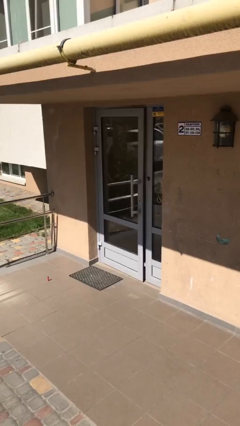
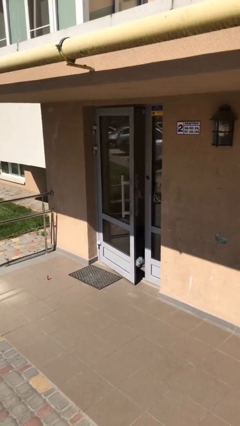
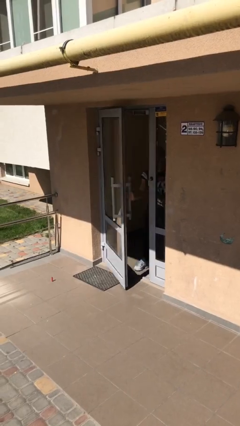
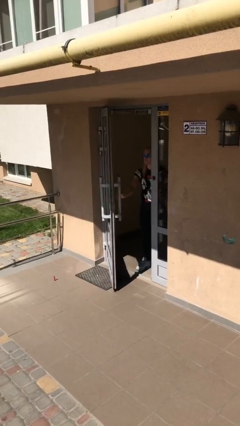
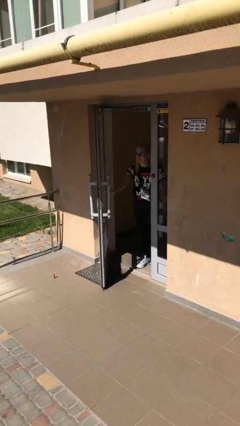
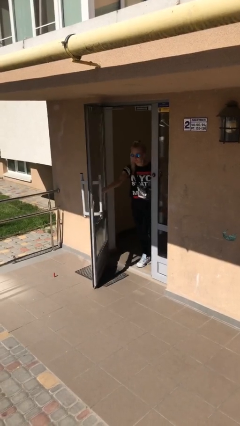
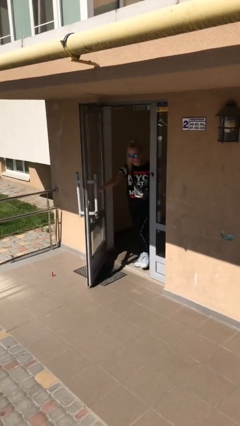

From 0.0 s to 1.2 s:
person opens facility door

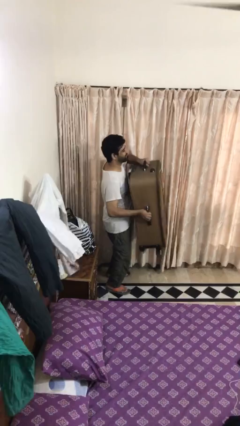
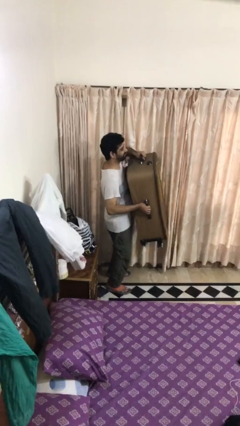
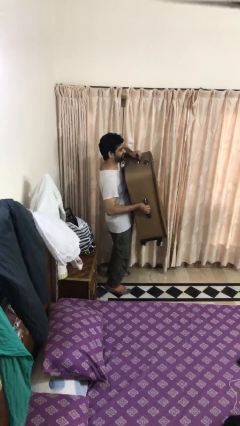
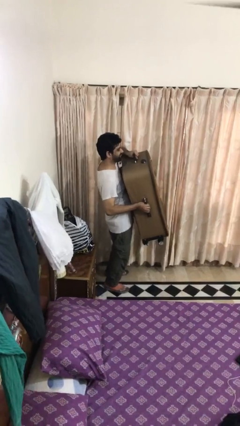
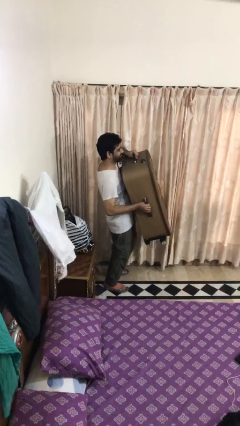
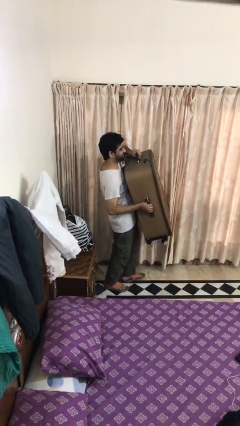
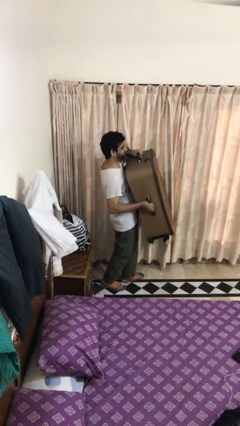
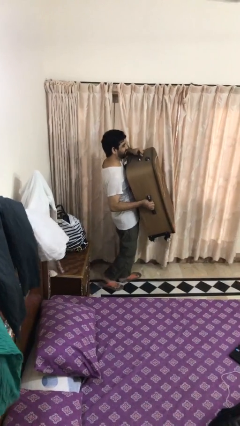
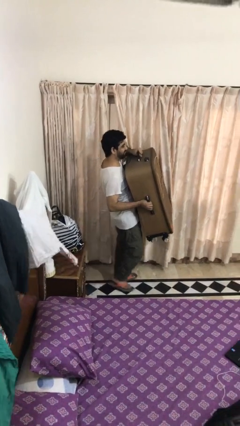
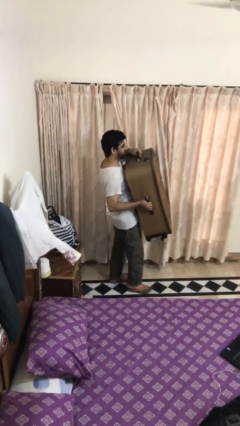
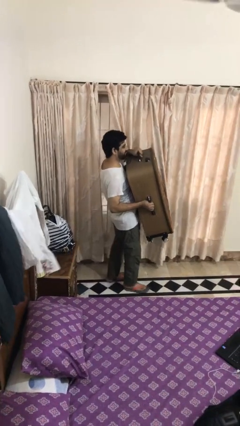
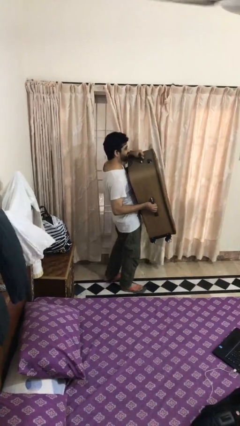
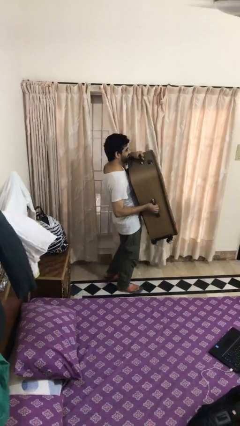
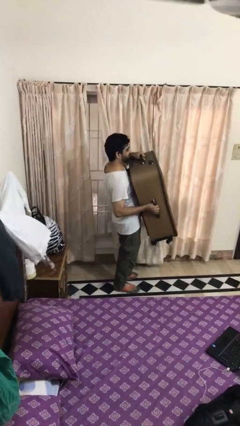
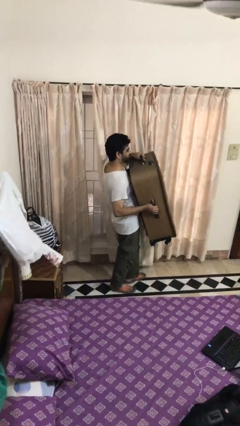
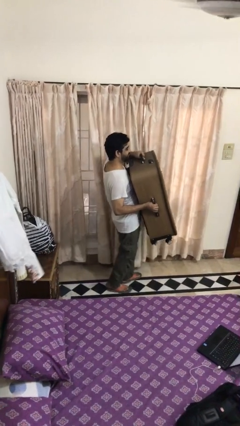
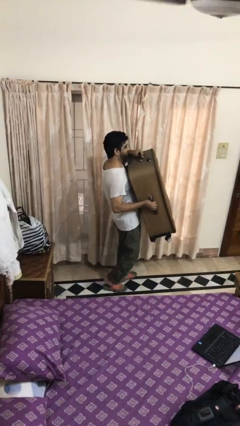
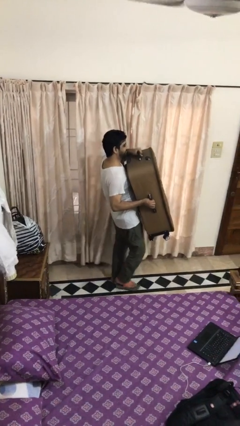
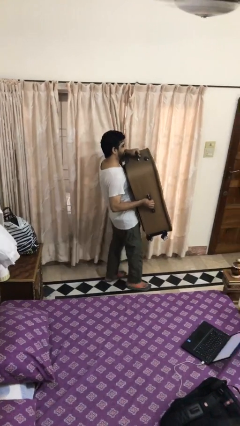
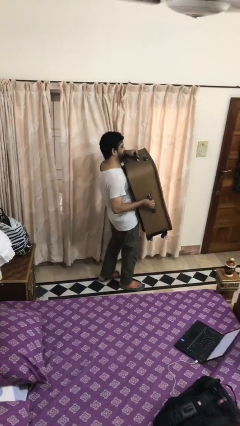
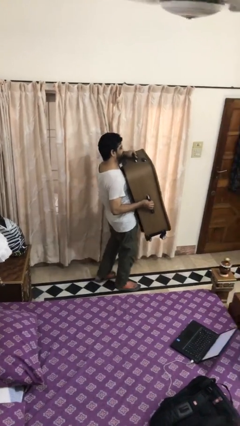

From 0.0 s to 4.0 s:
person carries heavy object

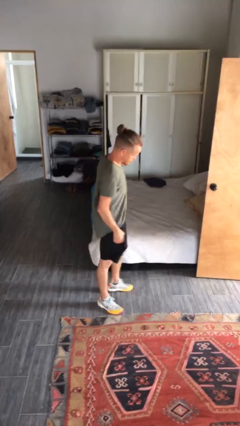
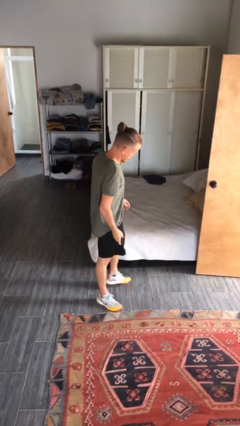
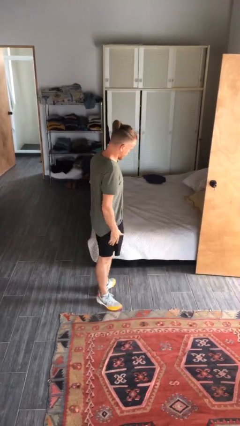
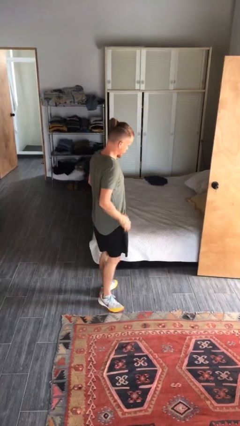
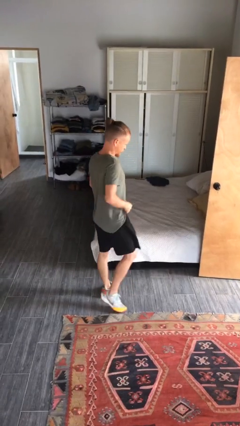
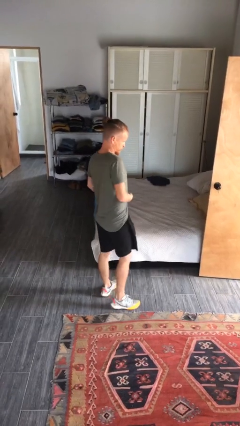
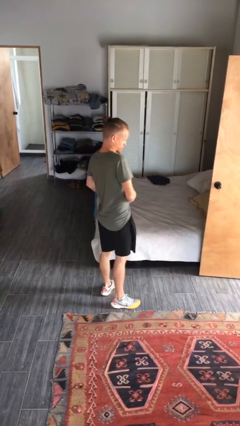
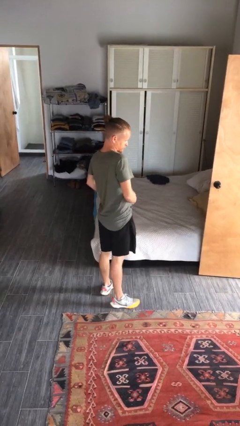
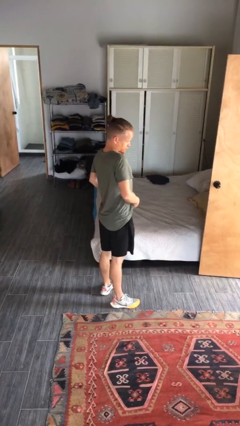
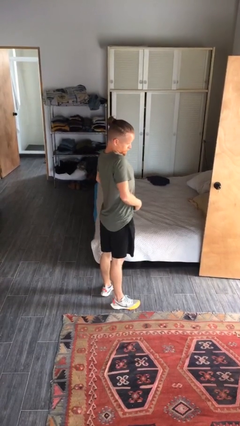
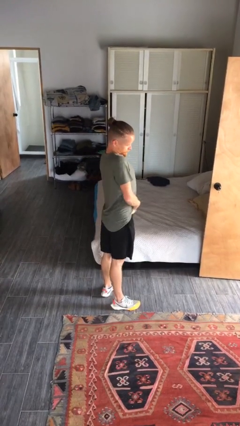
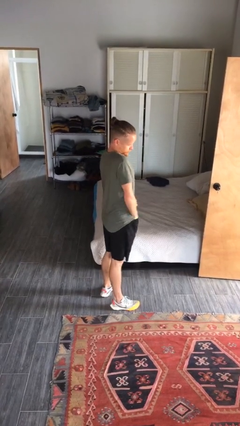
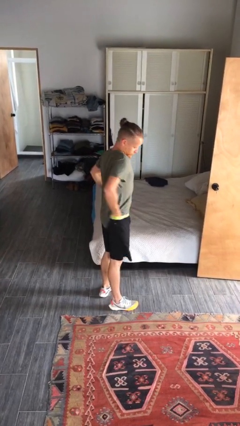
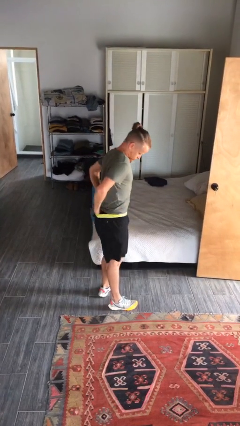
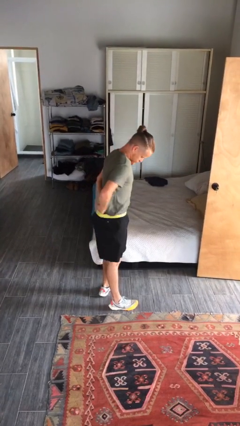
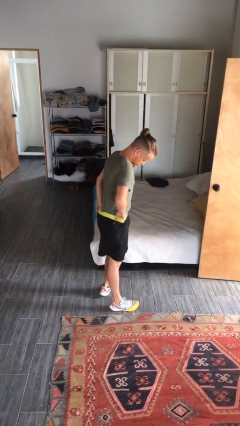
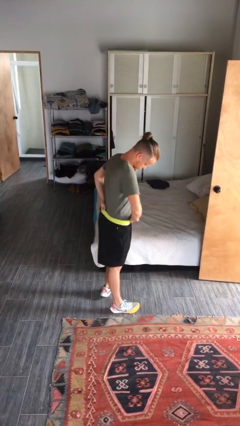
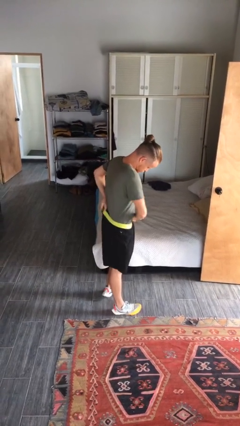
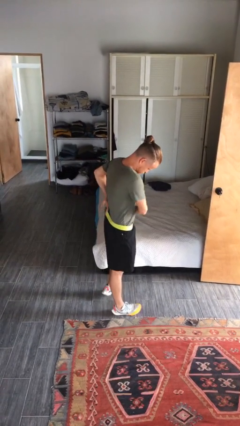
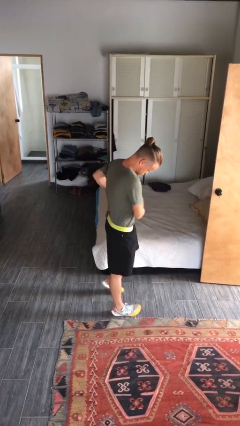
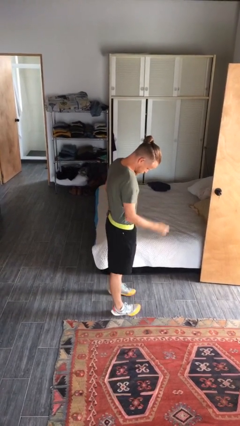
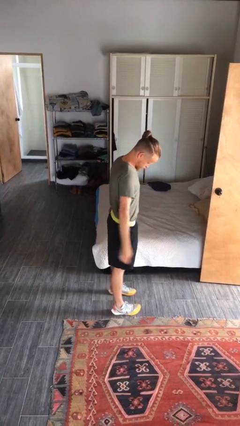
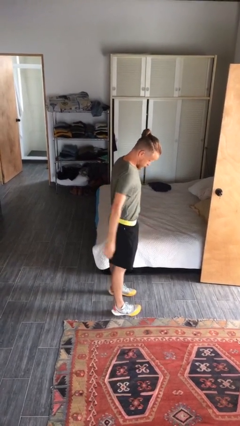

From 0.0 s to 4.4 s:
person tucks in shirt

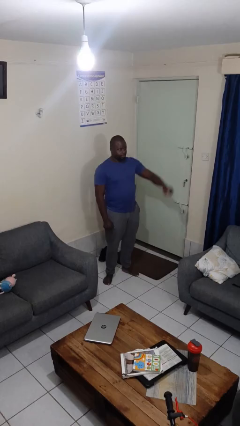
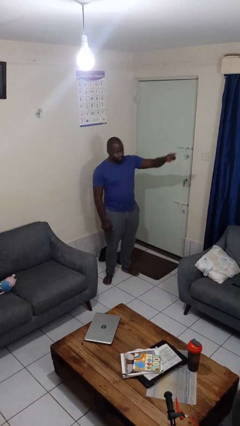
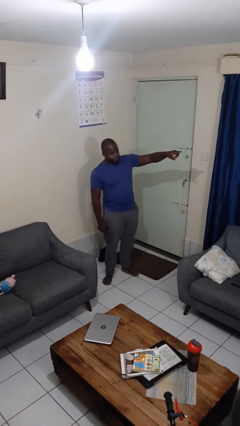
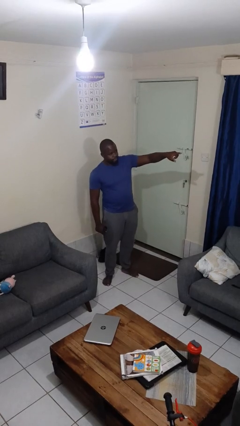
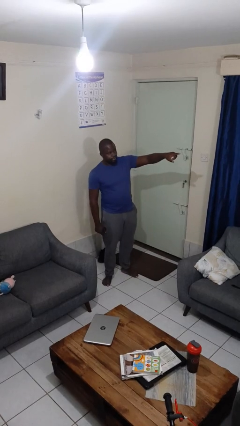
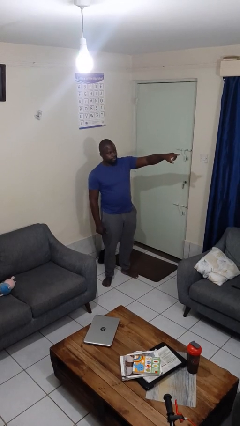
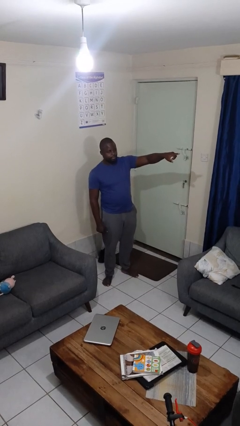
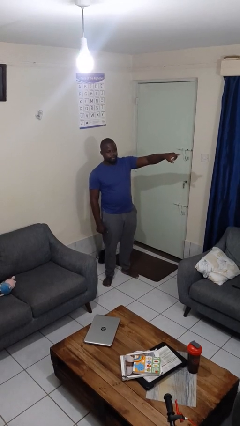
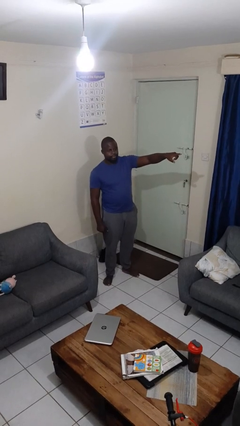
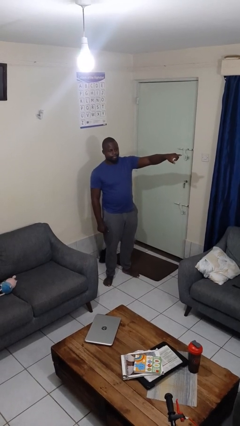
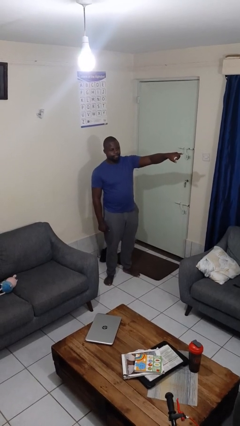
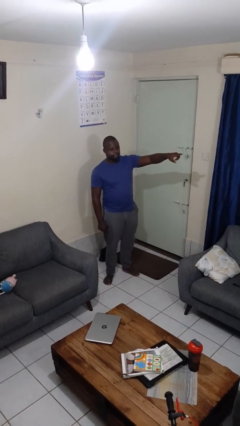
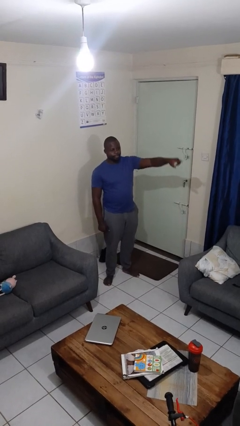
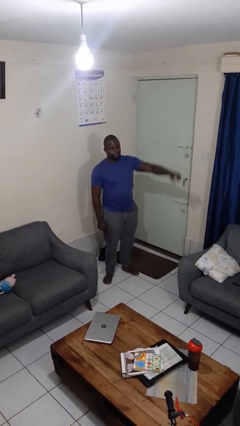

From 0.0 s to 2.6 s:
person points at person

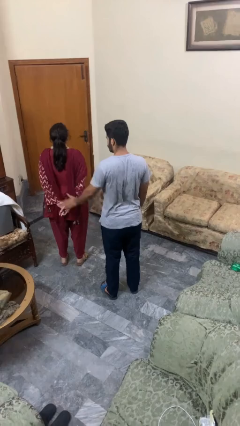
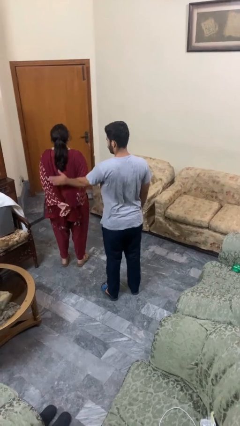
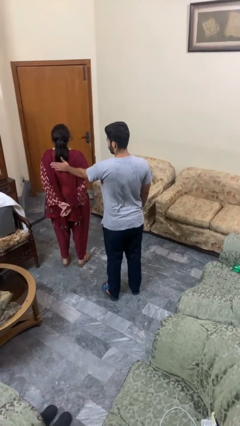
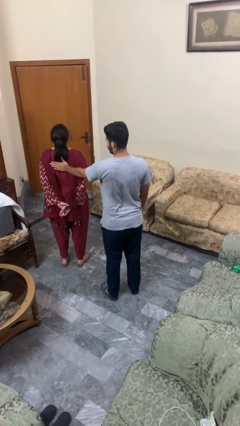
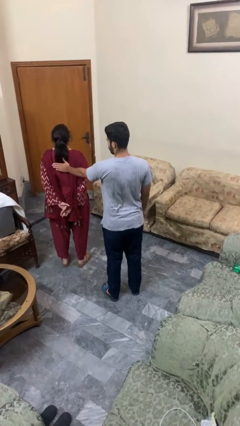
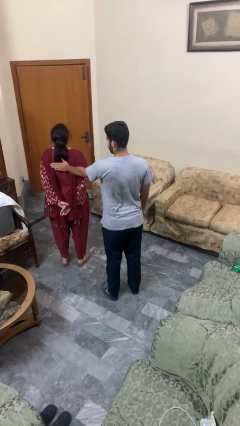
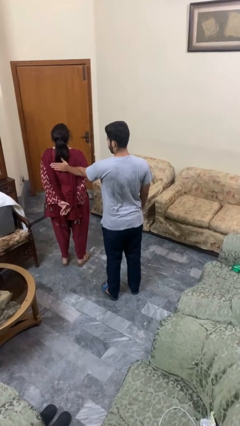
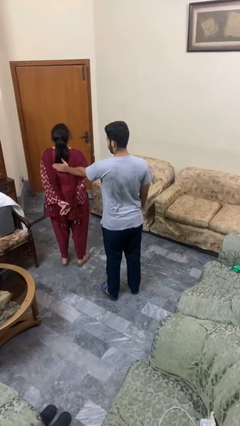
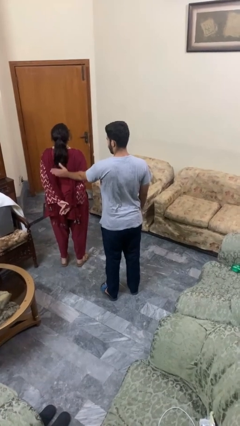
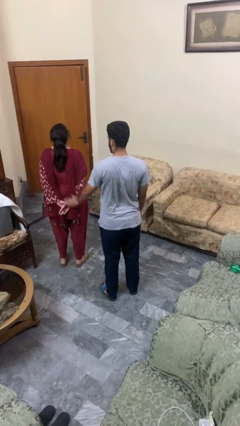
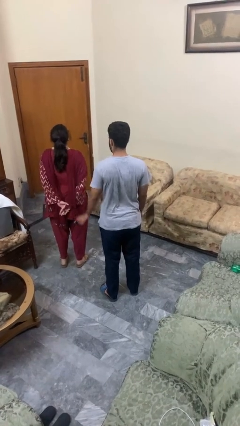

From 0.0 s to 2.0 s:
person touches back of person

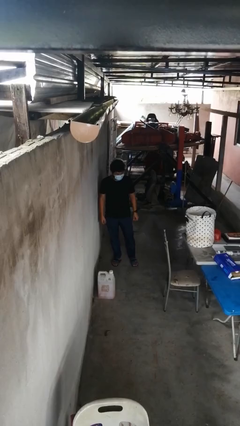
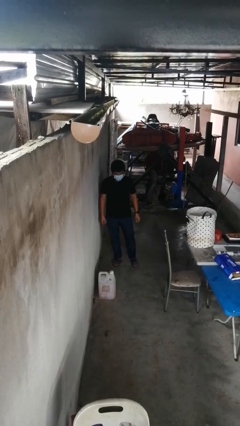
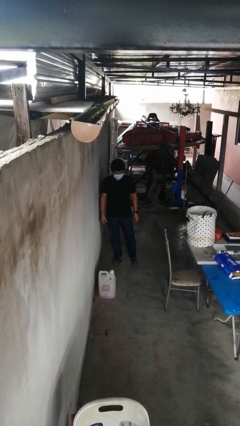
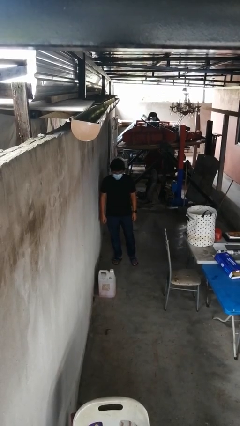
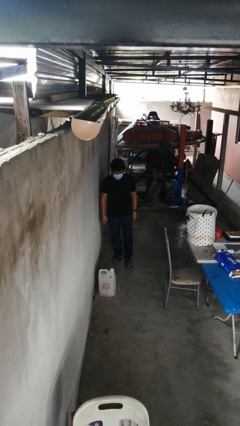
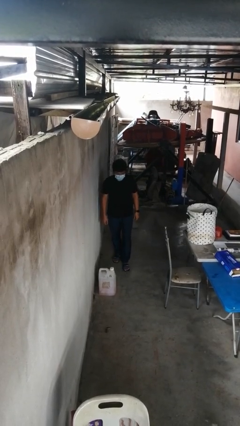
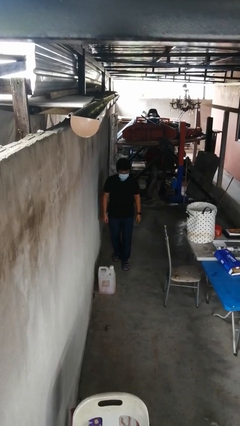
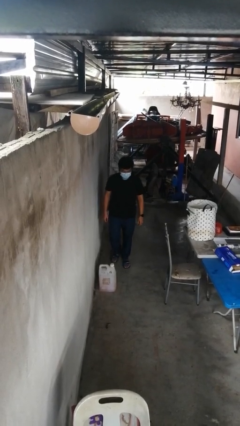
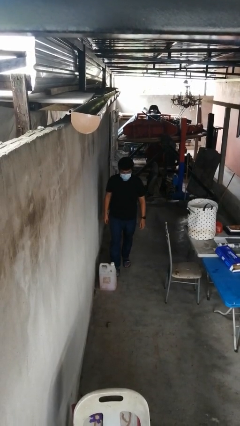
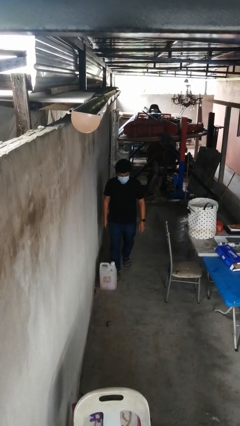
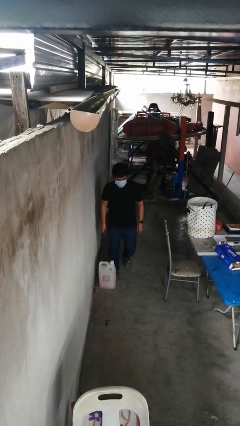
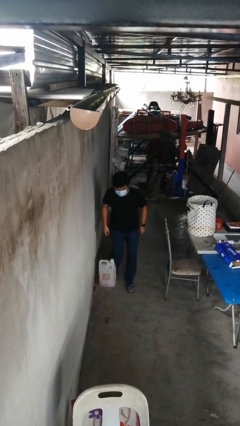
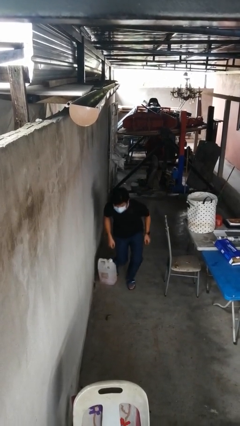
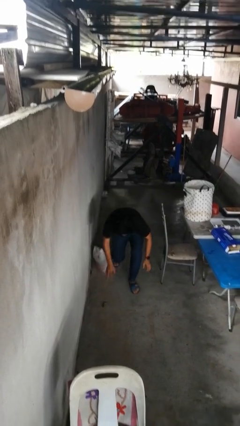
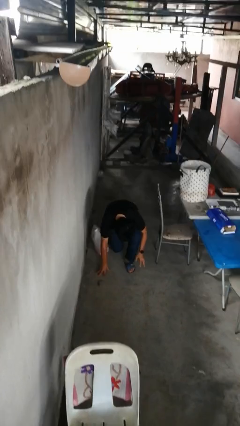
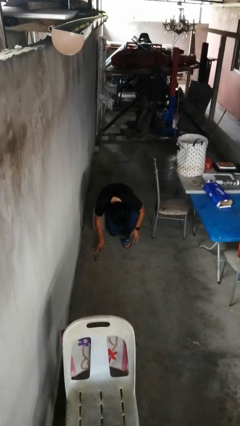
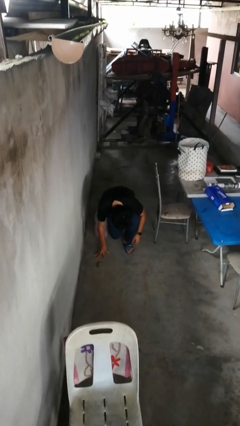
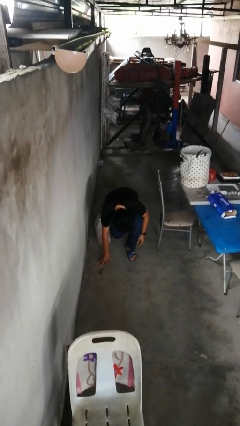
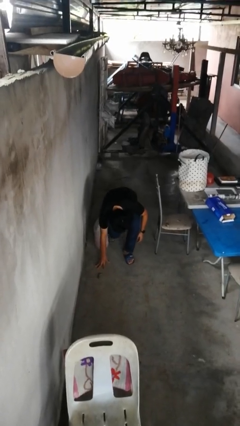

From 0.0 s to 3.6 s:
person trips on object on floor
